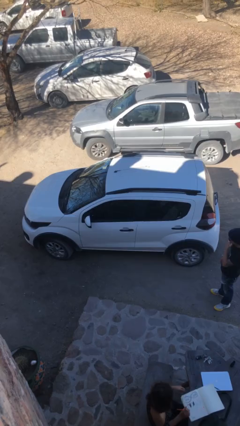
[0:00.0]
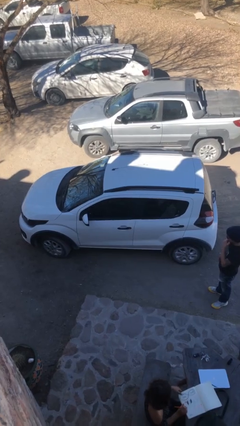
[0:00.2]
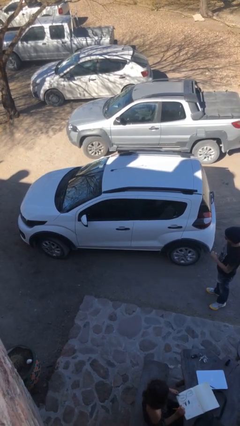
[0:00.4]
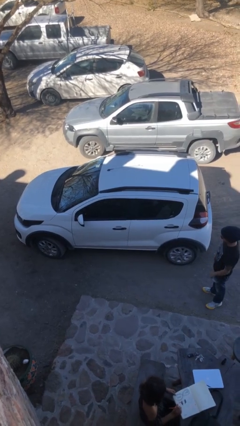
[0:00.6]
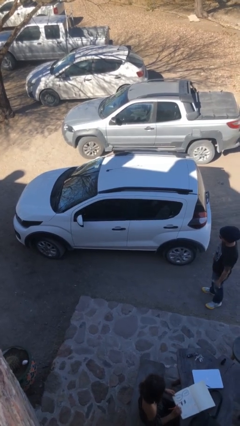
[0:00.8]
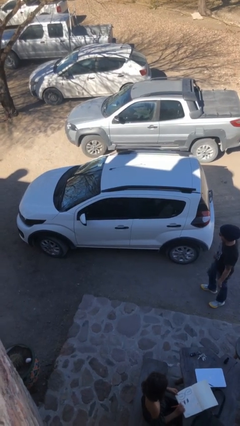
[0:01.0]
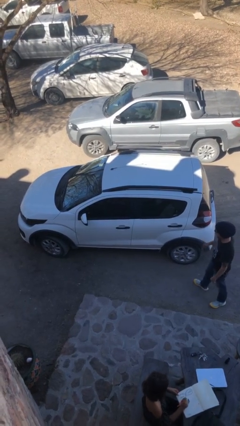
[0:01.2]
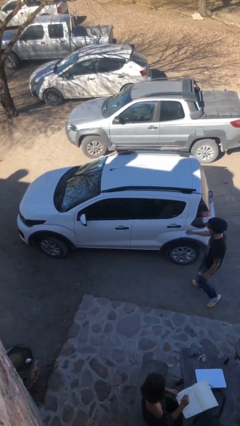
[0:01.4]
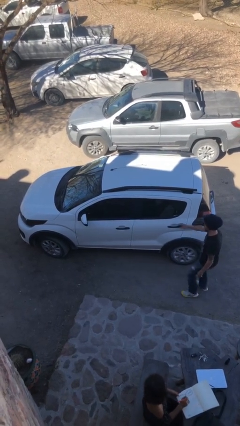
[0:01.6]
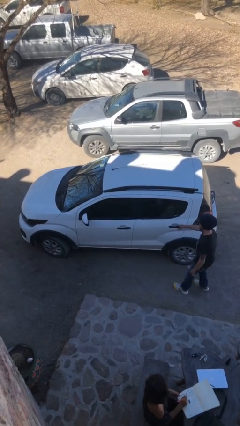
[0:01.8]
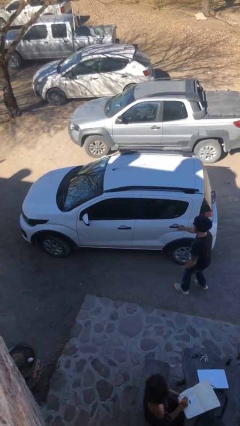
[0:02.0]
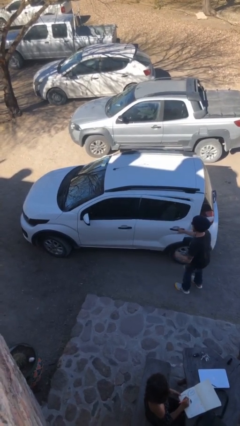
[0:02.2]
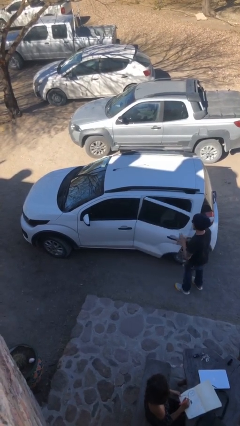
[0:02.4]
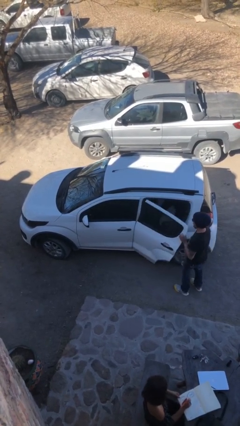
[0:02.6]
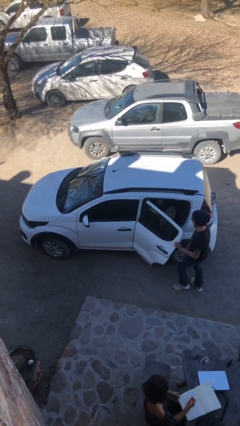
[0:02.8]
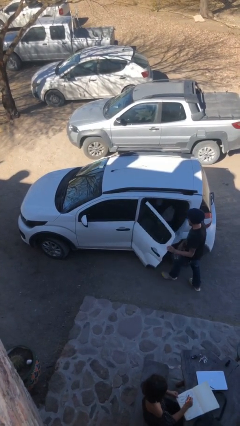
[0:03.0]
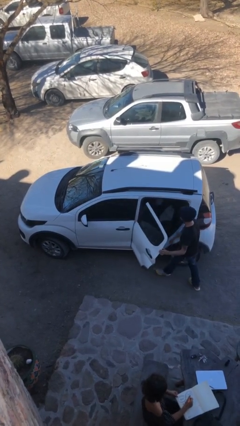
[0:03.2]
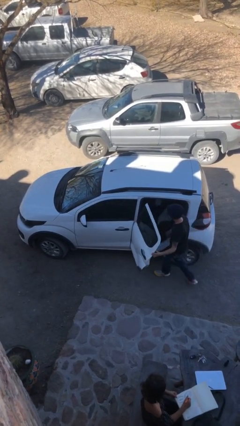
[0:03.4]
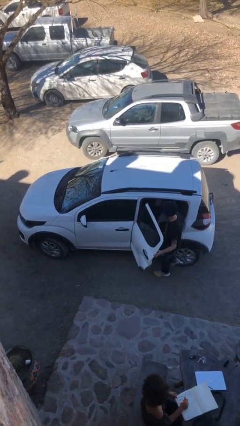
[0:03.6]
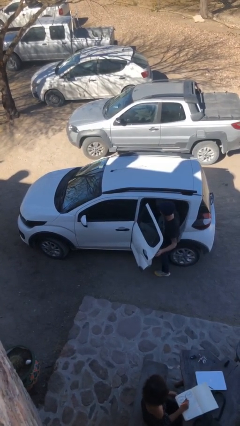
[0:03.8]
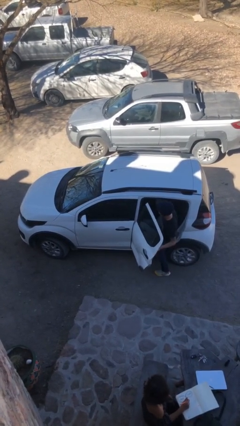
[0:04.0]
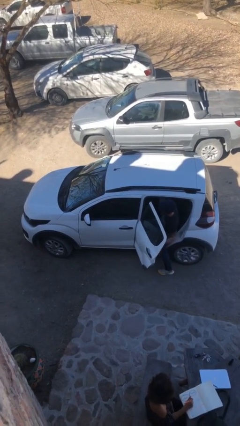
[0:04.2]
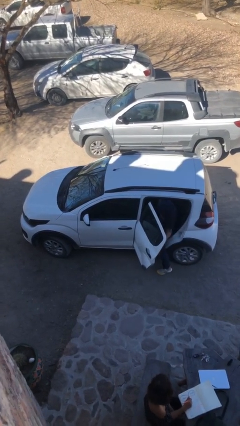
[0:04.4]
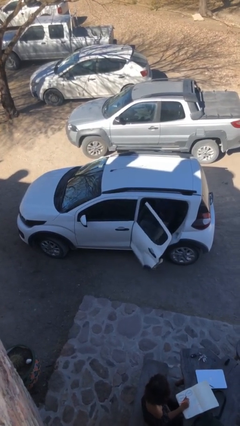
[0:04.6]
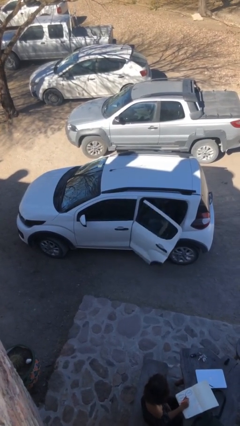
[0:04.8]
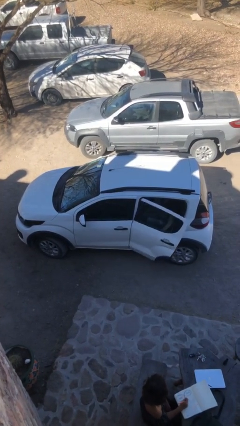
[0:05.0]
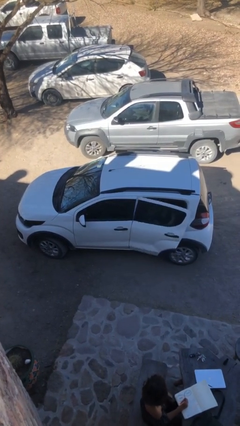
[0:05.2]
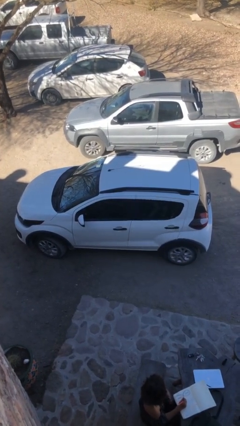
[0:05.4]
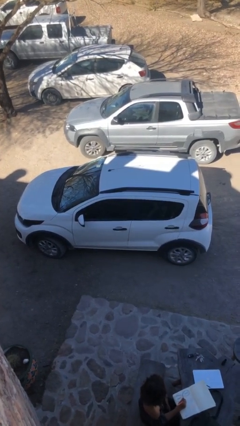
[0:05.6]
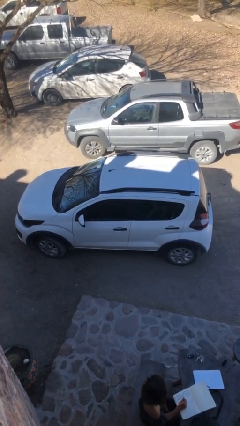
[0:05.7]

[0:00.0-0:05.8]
car picks up person

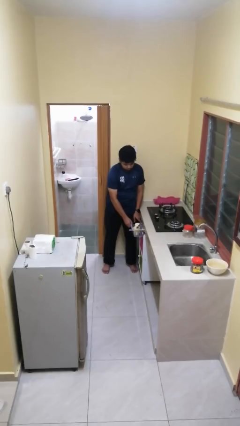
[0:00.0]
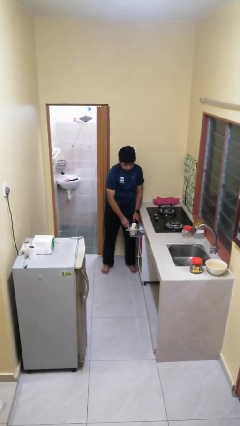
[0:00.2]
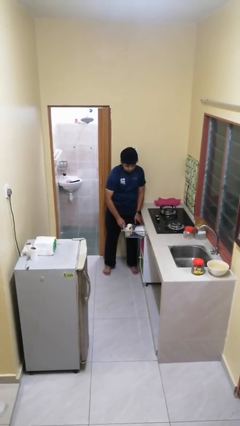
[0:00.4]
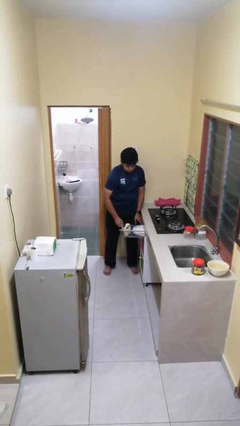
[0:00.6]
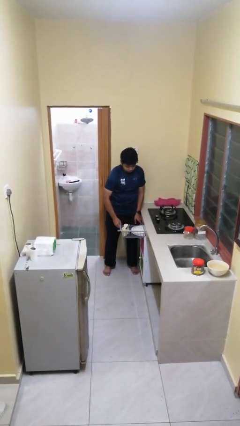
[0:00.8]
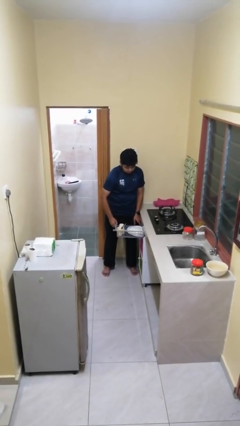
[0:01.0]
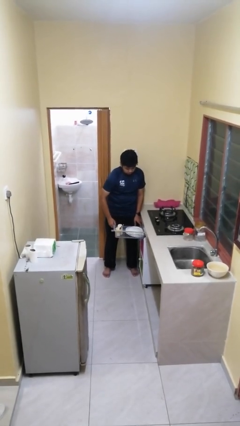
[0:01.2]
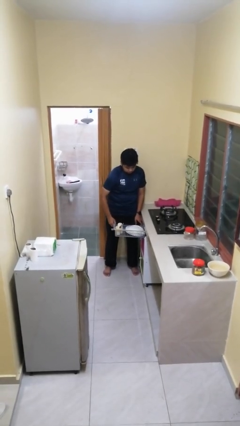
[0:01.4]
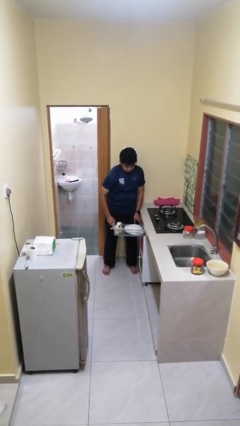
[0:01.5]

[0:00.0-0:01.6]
person opens kitchen drawer

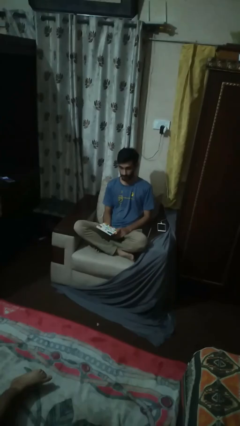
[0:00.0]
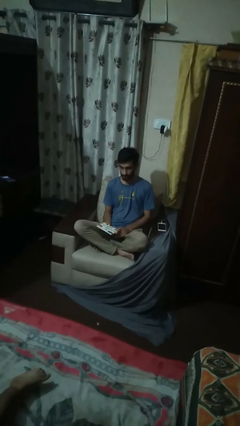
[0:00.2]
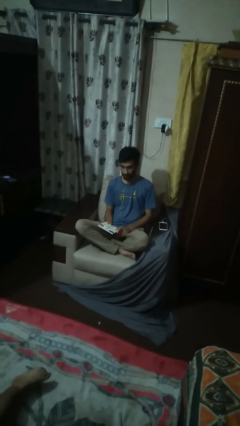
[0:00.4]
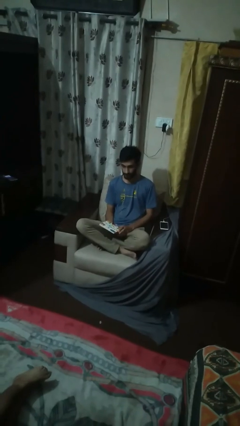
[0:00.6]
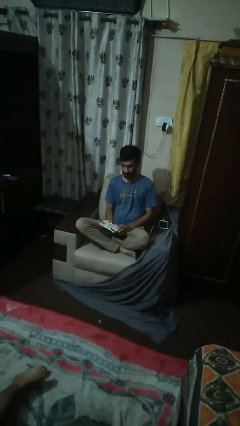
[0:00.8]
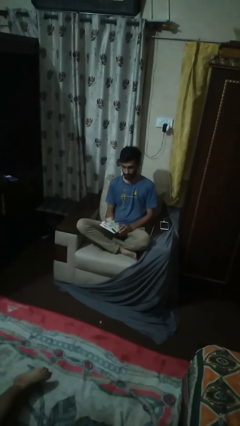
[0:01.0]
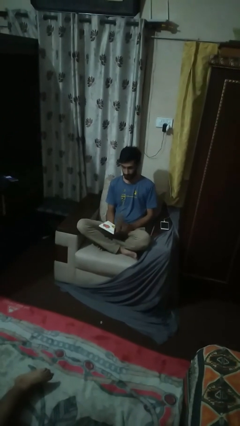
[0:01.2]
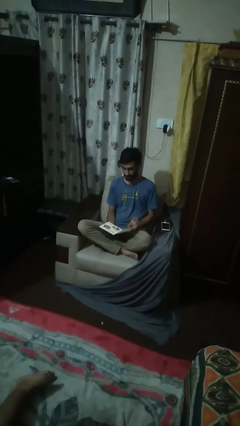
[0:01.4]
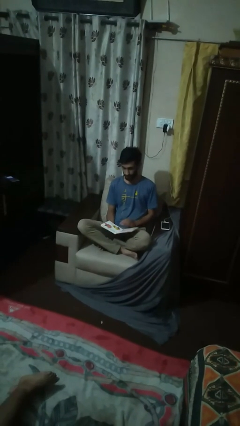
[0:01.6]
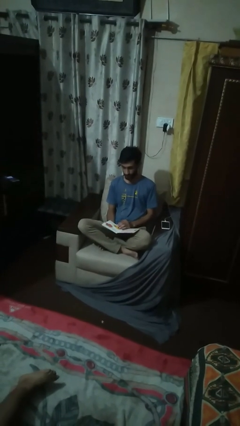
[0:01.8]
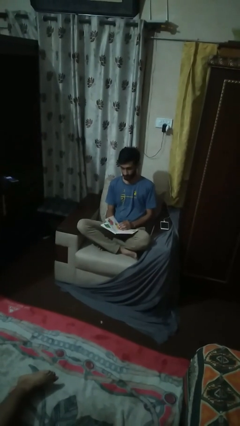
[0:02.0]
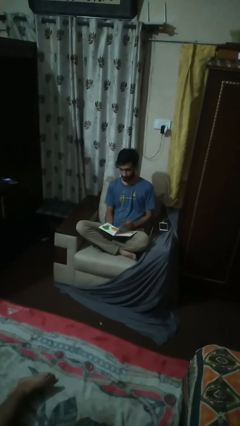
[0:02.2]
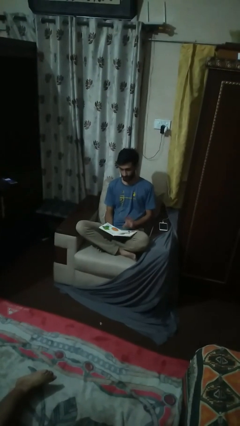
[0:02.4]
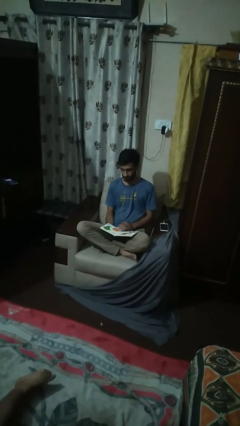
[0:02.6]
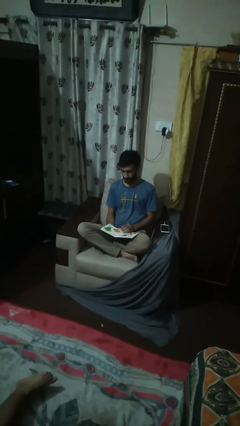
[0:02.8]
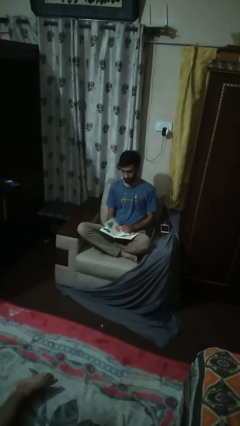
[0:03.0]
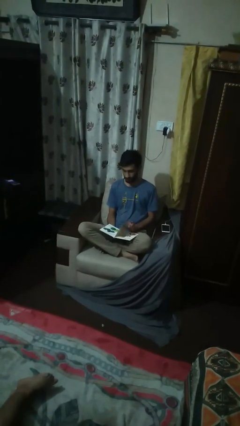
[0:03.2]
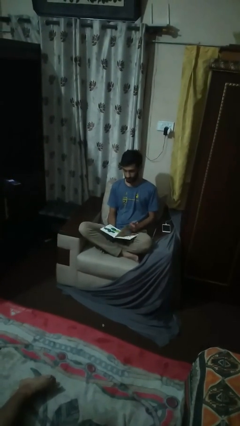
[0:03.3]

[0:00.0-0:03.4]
person reads magazine

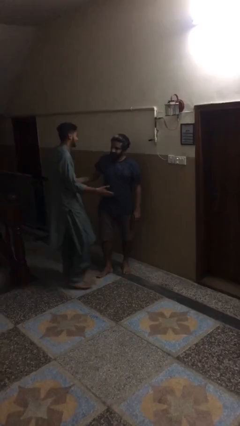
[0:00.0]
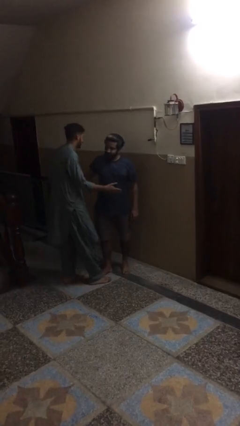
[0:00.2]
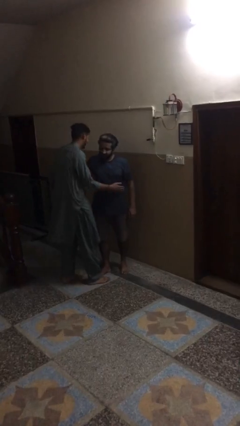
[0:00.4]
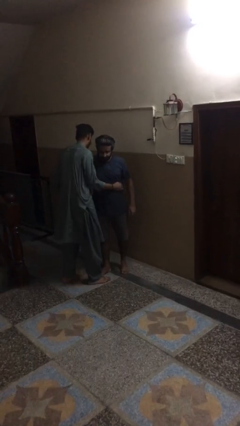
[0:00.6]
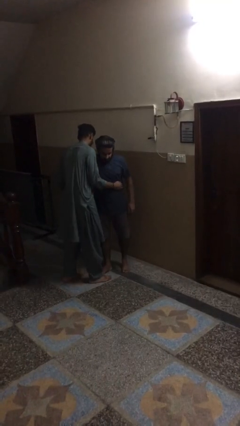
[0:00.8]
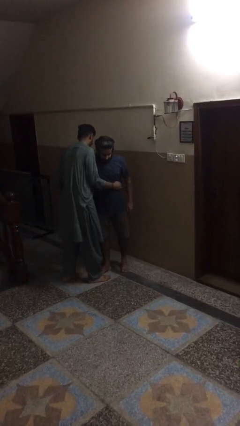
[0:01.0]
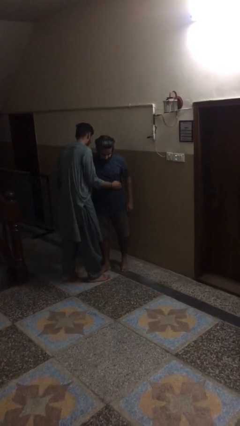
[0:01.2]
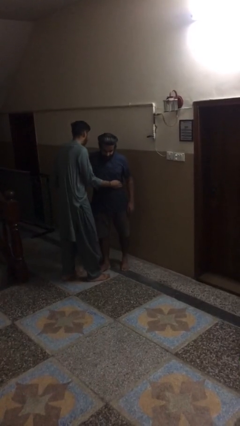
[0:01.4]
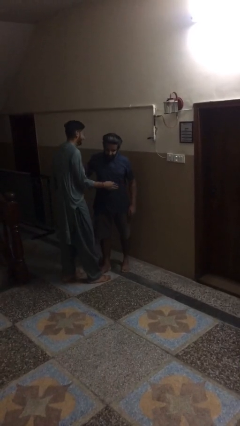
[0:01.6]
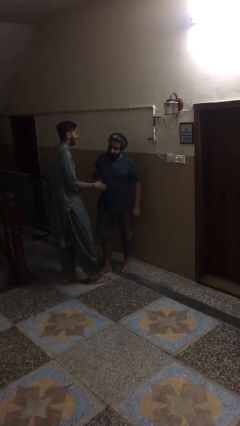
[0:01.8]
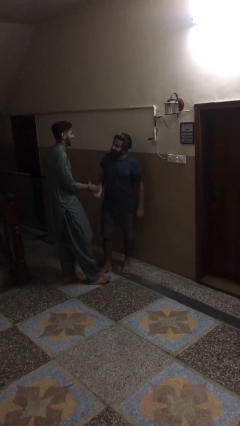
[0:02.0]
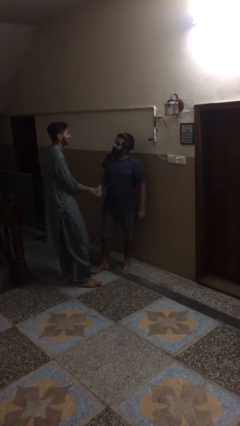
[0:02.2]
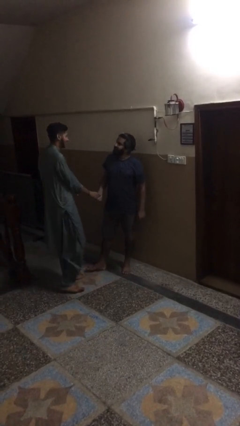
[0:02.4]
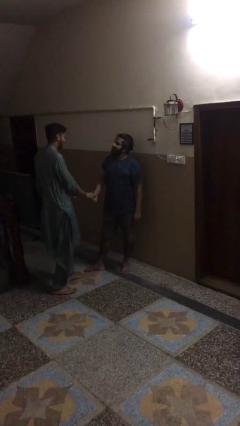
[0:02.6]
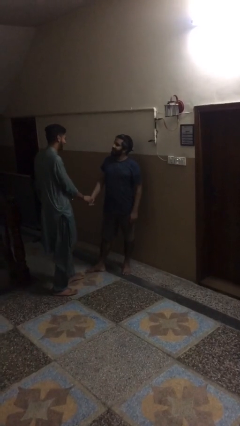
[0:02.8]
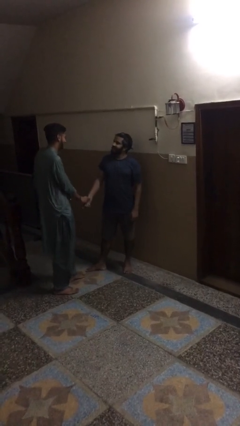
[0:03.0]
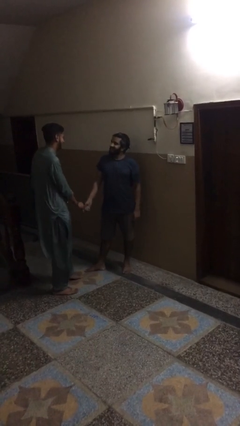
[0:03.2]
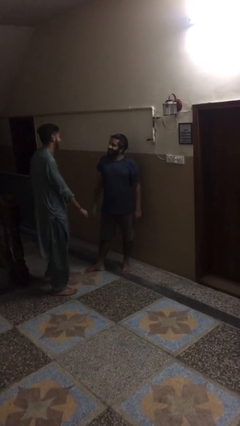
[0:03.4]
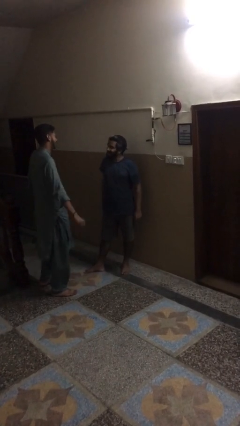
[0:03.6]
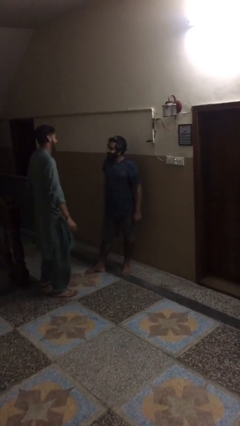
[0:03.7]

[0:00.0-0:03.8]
person embraces person

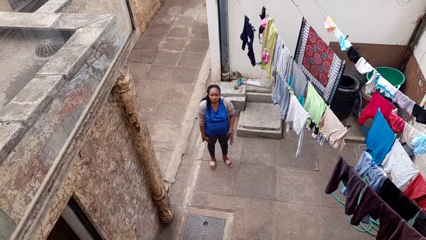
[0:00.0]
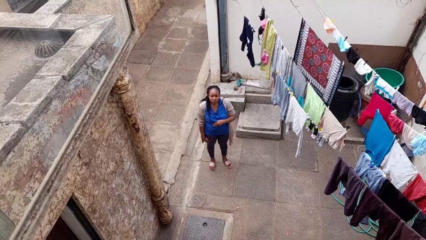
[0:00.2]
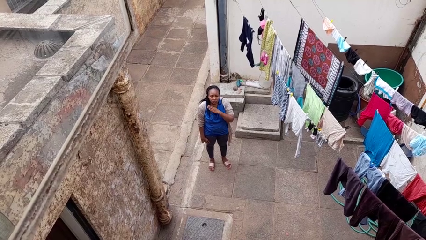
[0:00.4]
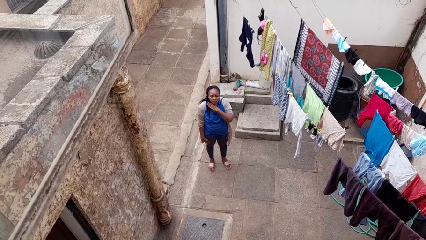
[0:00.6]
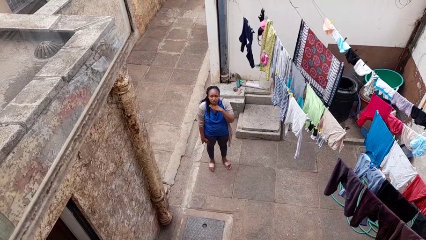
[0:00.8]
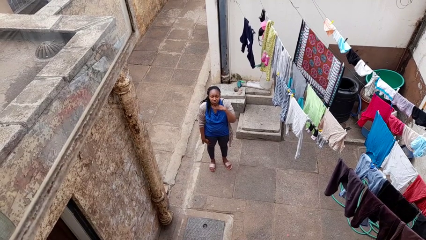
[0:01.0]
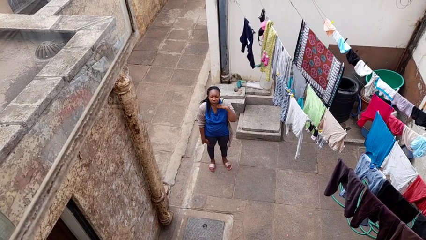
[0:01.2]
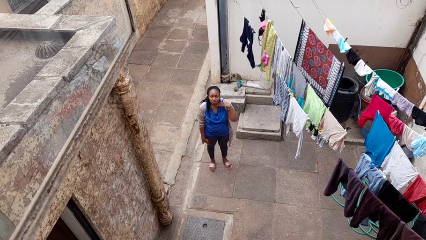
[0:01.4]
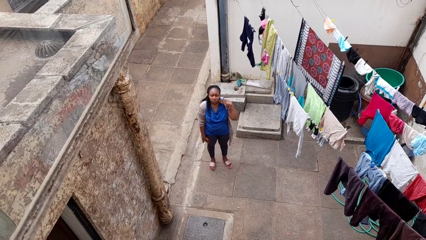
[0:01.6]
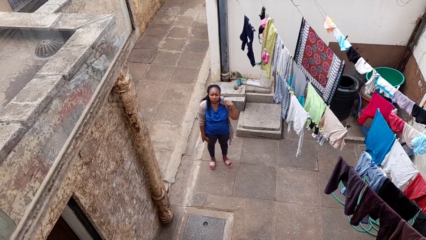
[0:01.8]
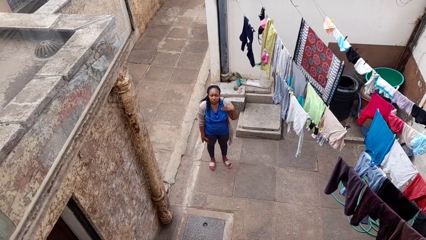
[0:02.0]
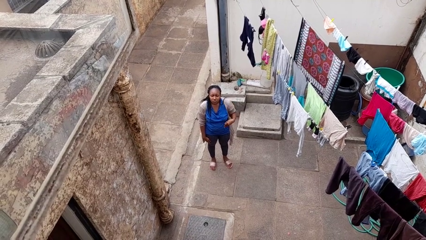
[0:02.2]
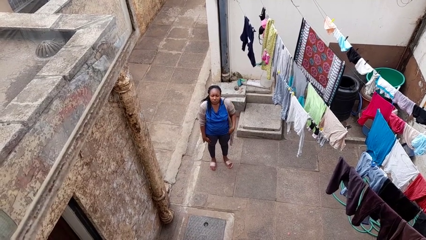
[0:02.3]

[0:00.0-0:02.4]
person gestures cut

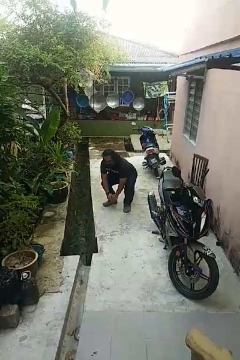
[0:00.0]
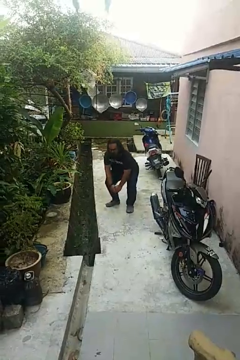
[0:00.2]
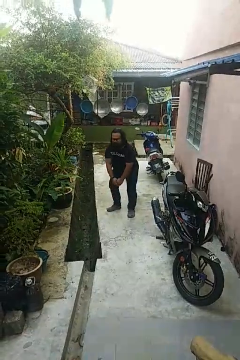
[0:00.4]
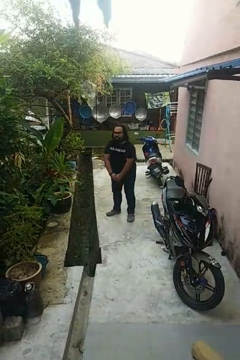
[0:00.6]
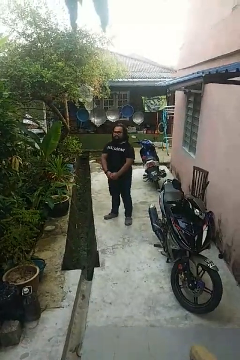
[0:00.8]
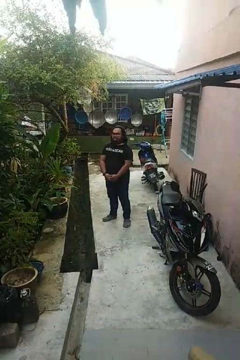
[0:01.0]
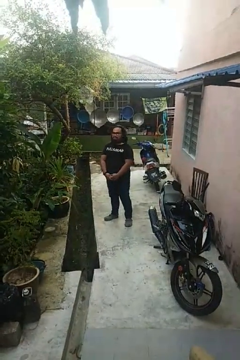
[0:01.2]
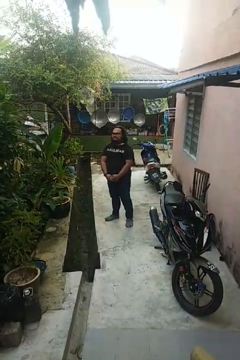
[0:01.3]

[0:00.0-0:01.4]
person stands up
